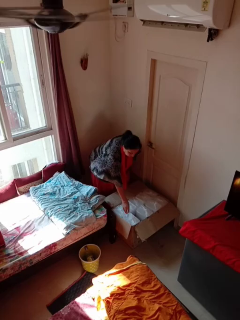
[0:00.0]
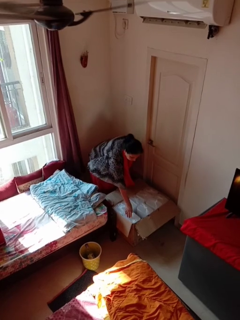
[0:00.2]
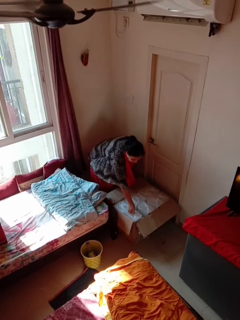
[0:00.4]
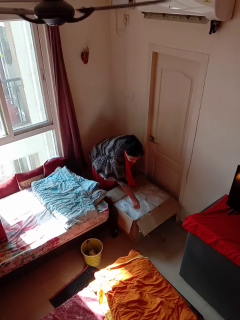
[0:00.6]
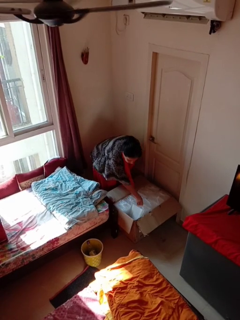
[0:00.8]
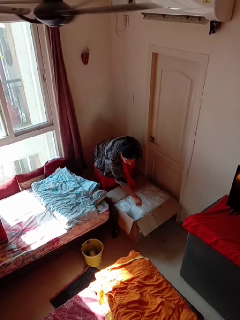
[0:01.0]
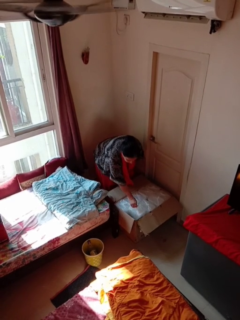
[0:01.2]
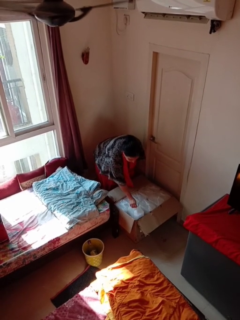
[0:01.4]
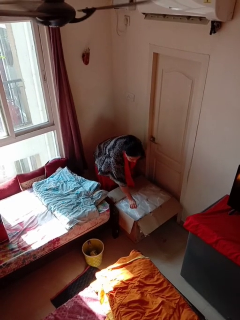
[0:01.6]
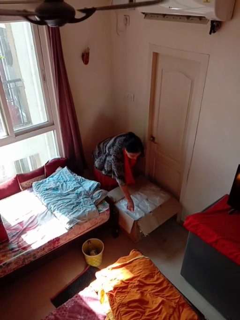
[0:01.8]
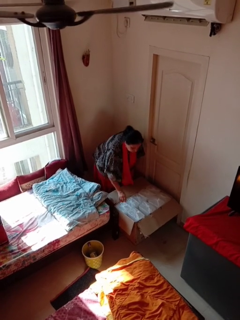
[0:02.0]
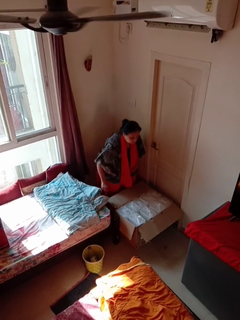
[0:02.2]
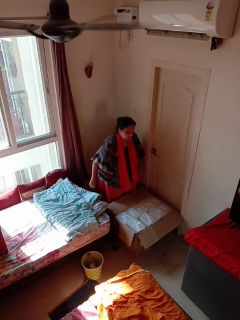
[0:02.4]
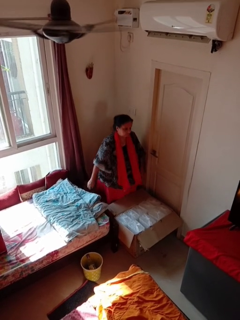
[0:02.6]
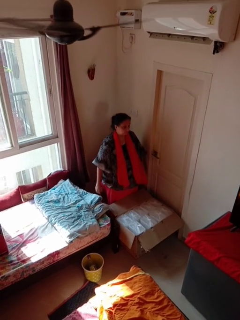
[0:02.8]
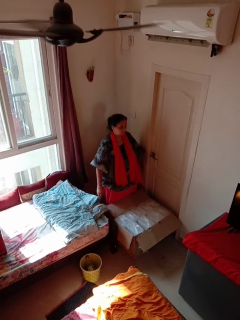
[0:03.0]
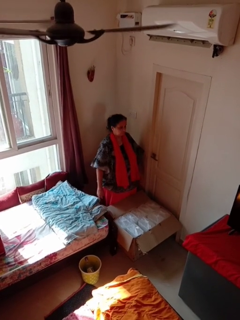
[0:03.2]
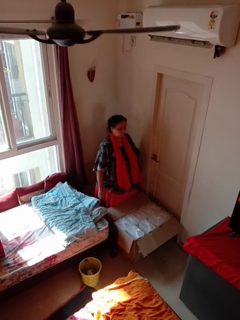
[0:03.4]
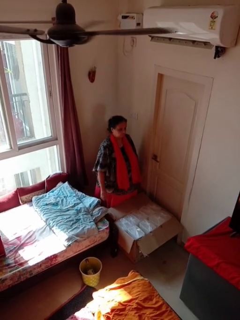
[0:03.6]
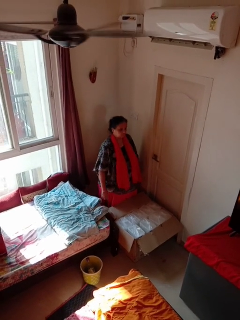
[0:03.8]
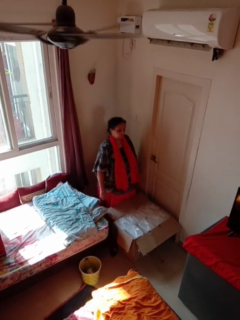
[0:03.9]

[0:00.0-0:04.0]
person searches in box

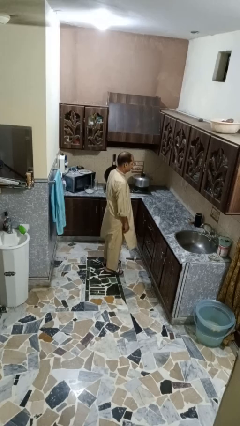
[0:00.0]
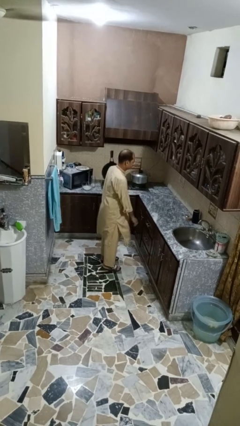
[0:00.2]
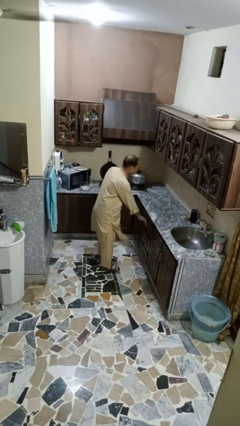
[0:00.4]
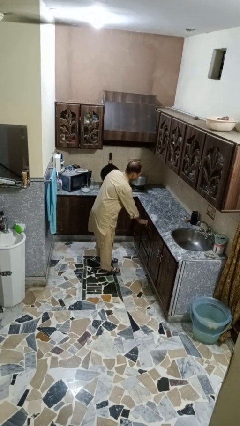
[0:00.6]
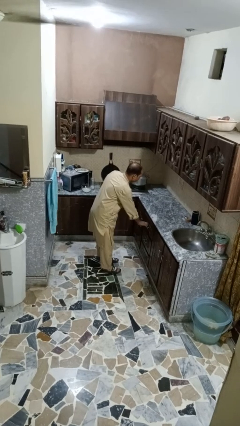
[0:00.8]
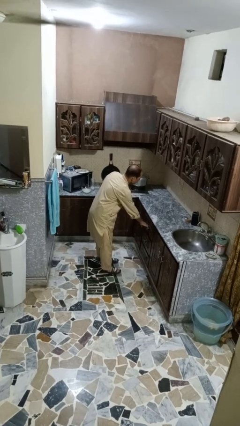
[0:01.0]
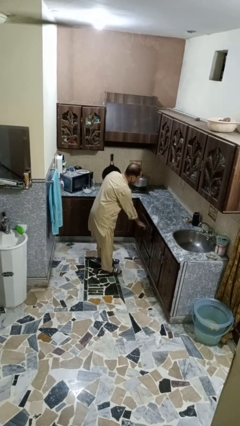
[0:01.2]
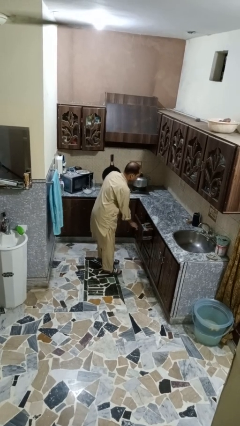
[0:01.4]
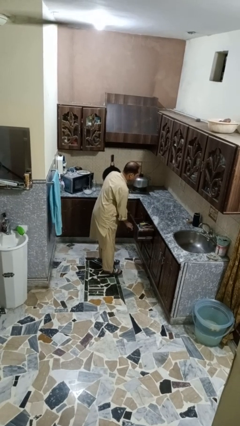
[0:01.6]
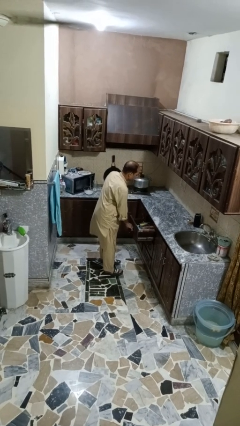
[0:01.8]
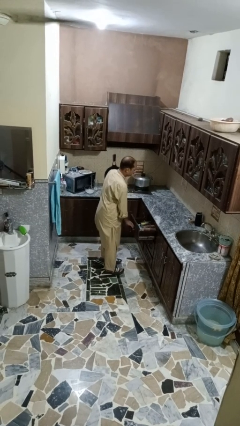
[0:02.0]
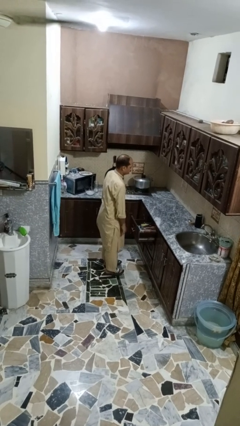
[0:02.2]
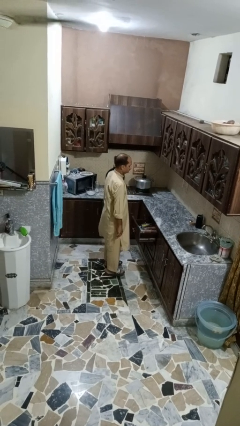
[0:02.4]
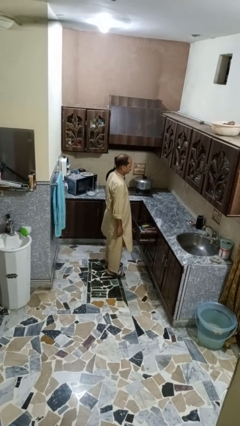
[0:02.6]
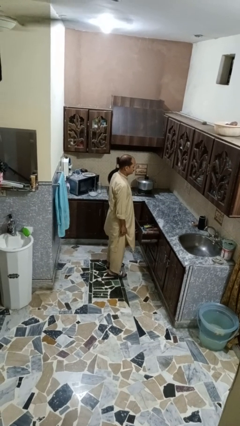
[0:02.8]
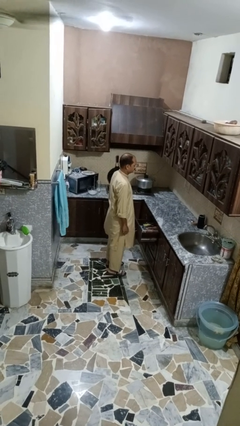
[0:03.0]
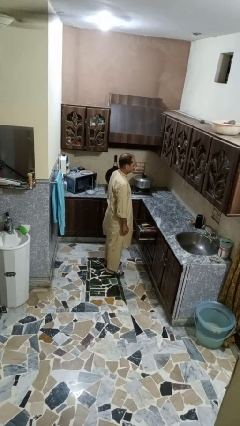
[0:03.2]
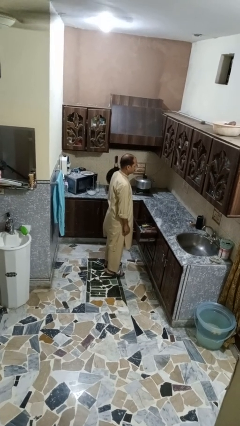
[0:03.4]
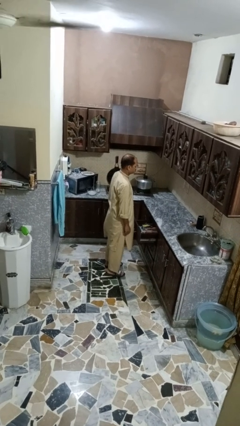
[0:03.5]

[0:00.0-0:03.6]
person opens kitchen drawer

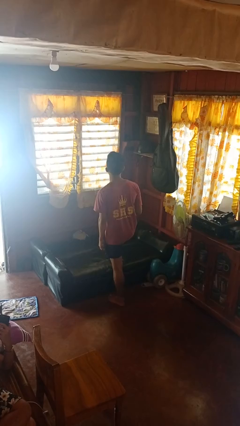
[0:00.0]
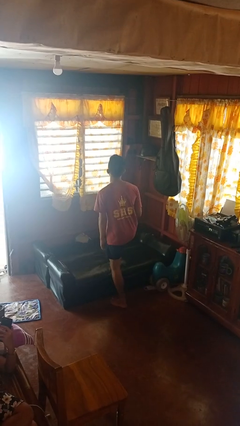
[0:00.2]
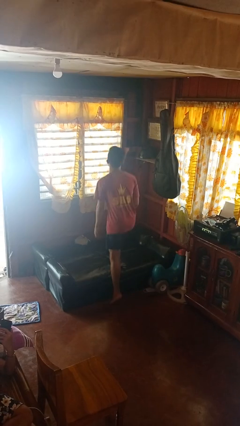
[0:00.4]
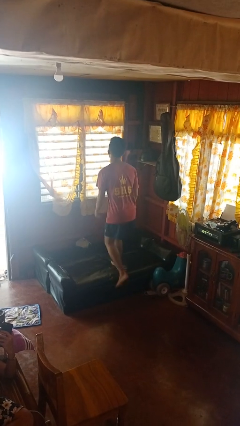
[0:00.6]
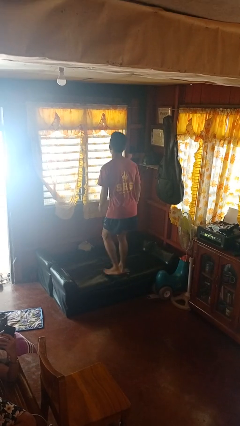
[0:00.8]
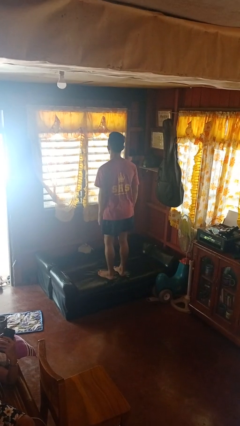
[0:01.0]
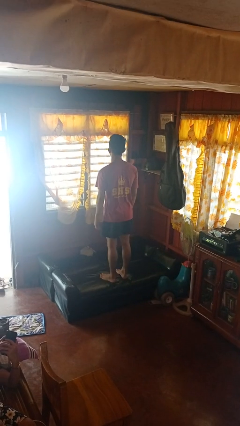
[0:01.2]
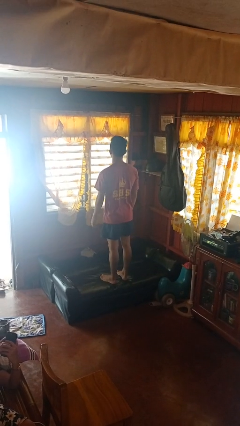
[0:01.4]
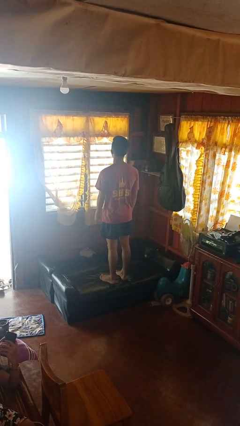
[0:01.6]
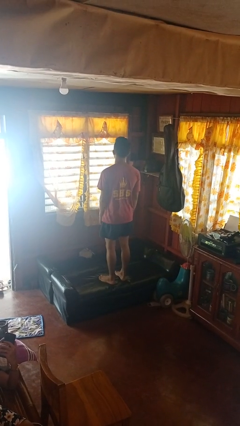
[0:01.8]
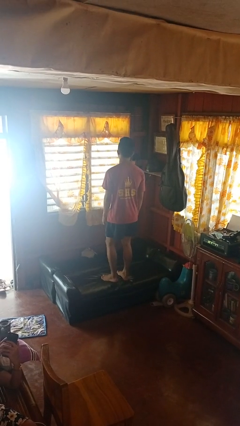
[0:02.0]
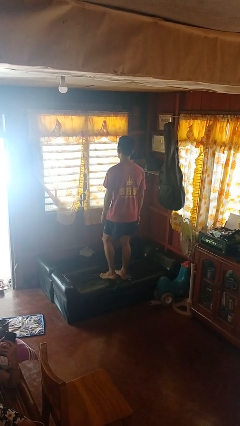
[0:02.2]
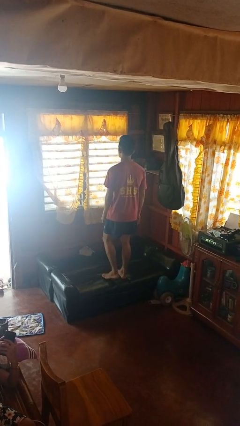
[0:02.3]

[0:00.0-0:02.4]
person climbs on couch

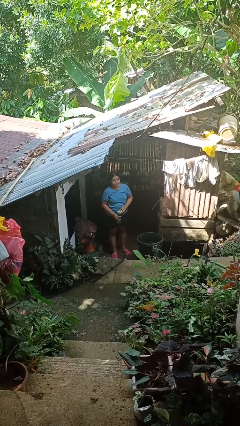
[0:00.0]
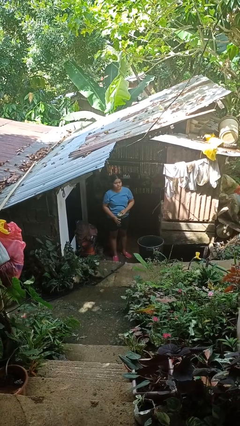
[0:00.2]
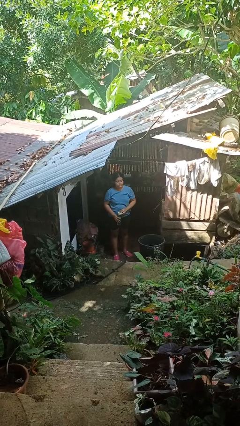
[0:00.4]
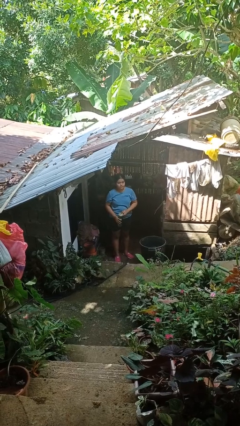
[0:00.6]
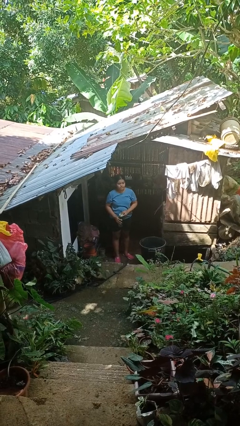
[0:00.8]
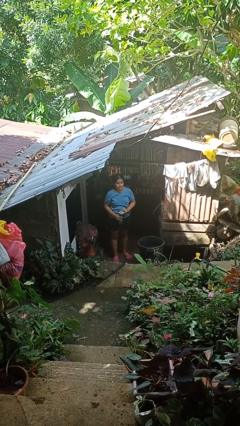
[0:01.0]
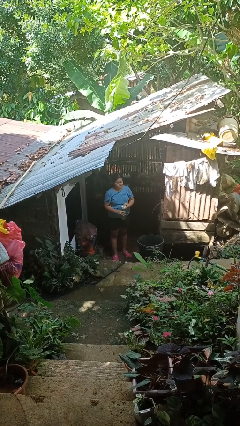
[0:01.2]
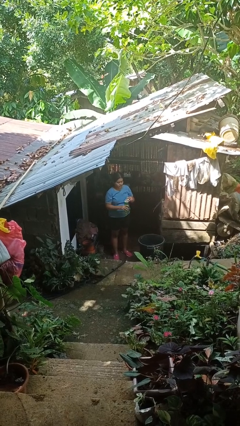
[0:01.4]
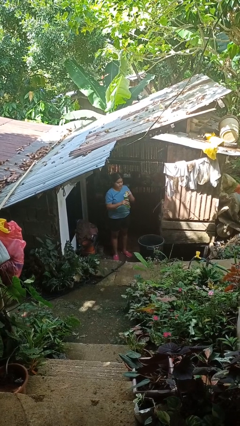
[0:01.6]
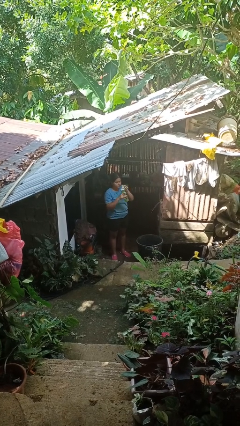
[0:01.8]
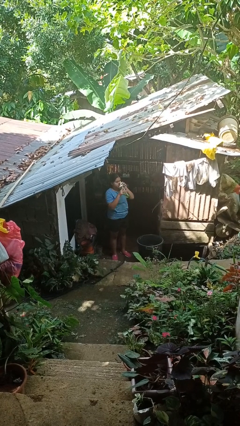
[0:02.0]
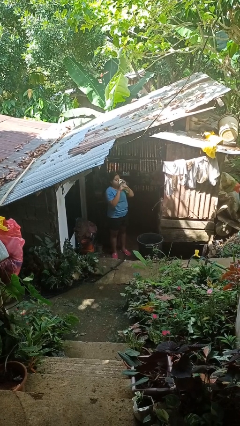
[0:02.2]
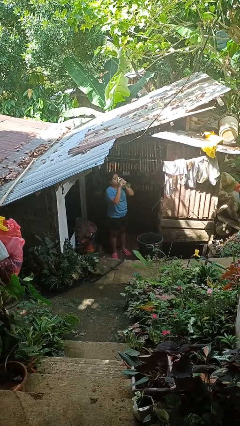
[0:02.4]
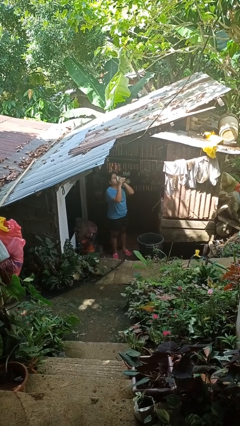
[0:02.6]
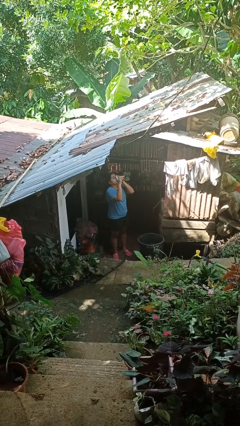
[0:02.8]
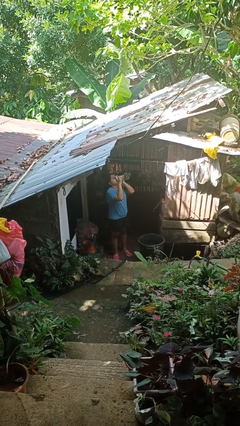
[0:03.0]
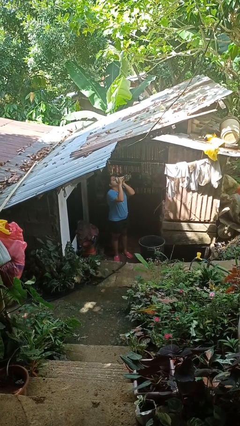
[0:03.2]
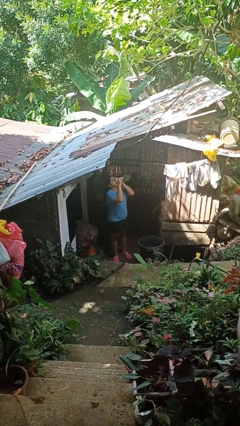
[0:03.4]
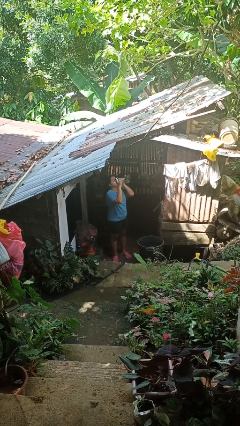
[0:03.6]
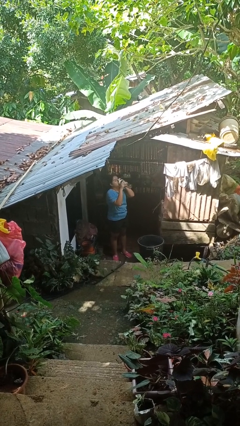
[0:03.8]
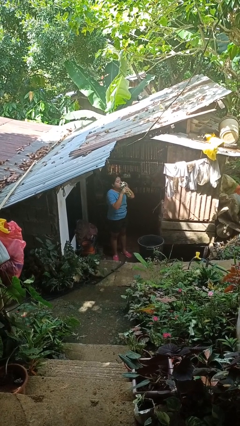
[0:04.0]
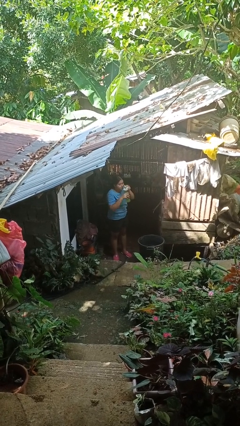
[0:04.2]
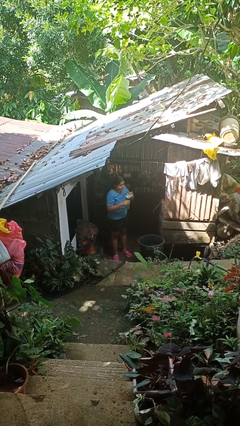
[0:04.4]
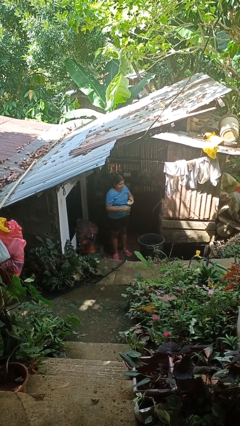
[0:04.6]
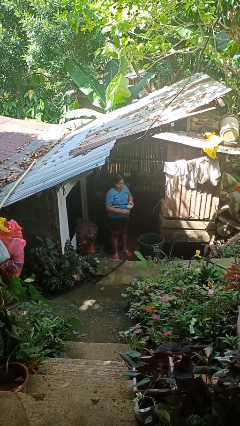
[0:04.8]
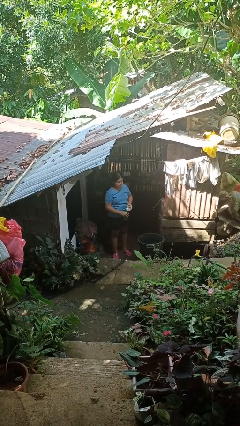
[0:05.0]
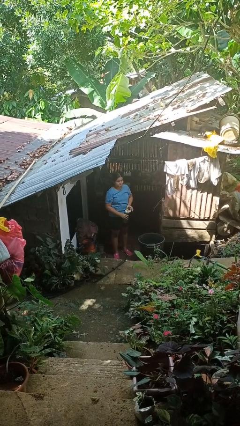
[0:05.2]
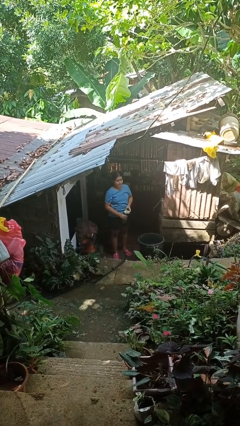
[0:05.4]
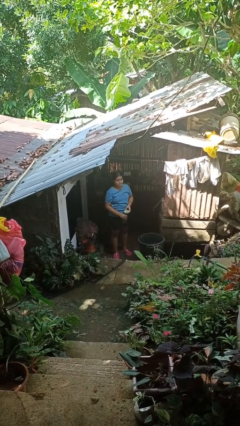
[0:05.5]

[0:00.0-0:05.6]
person drinks from bottle

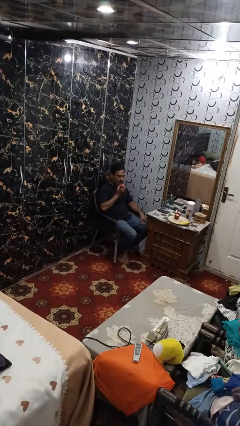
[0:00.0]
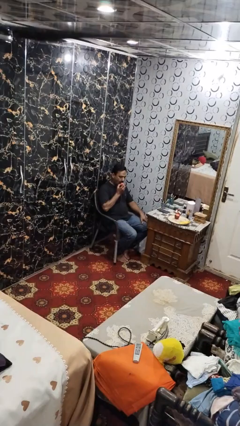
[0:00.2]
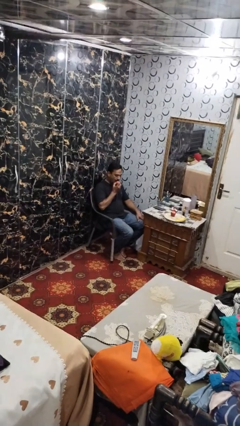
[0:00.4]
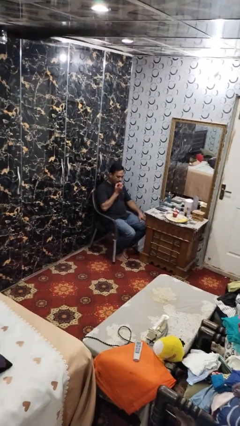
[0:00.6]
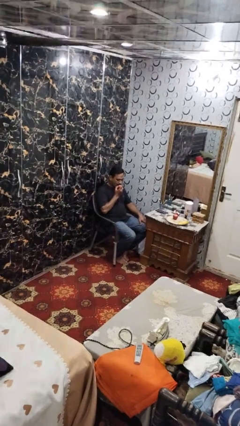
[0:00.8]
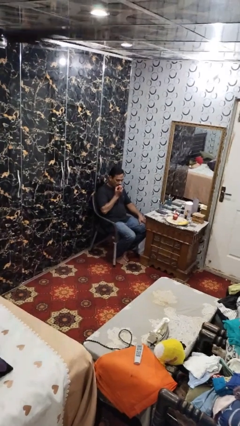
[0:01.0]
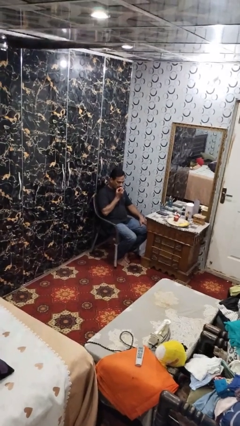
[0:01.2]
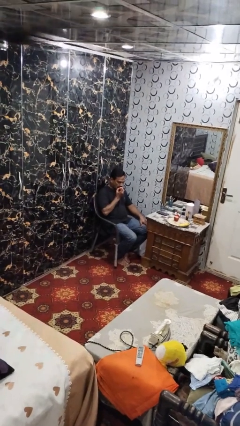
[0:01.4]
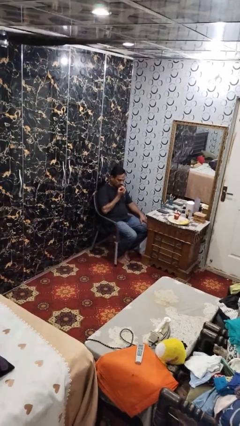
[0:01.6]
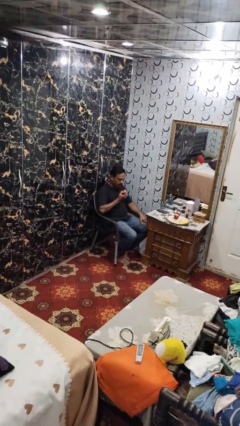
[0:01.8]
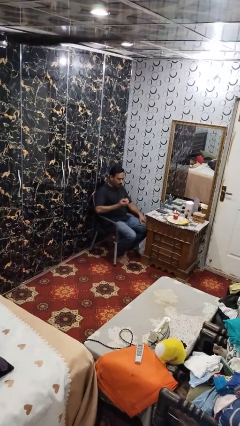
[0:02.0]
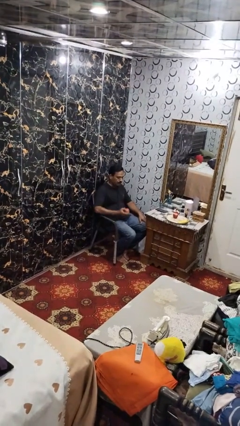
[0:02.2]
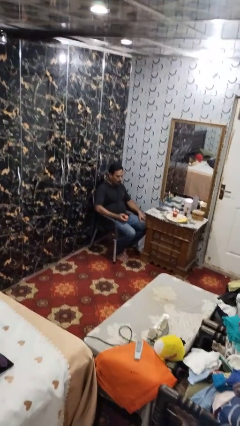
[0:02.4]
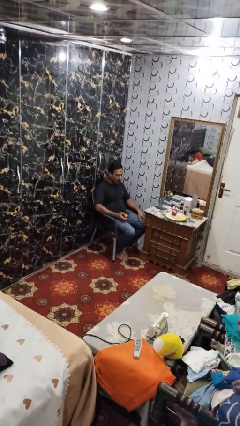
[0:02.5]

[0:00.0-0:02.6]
person eats apple

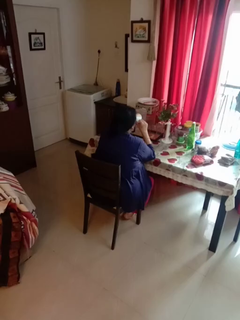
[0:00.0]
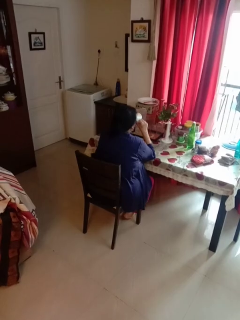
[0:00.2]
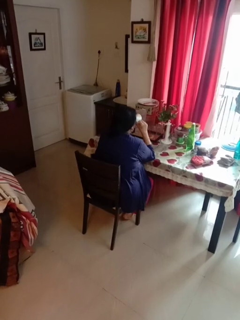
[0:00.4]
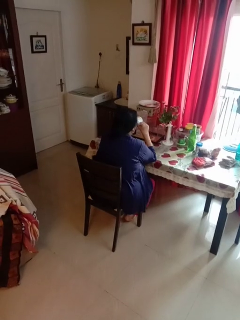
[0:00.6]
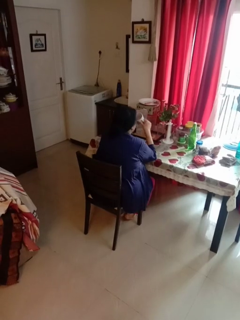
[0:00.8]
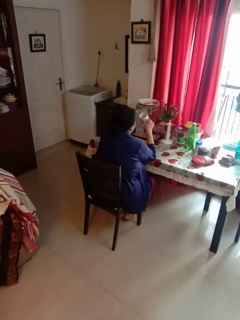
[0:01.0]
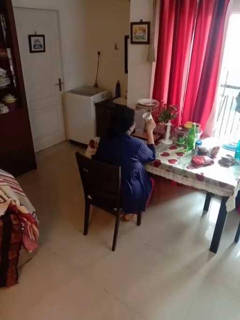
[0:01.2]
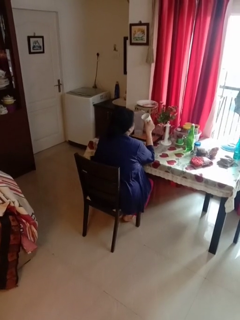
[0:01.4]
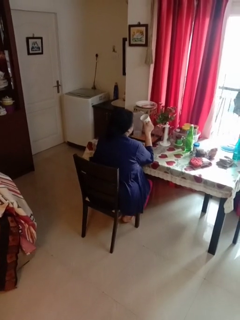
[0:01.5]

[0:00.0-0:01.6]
person drinks from mug
